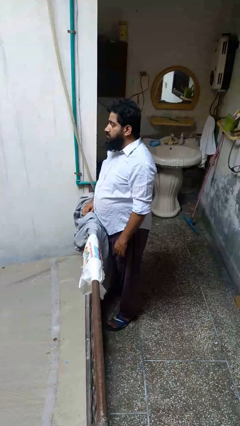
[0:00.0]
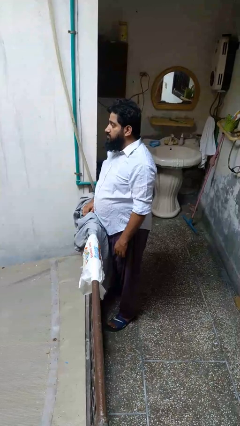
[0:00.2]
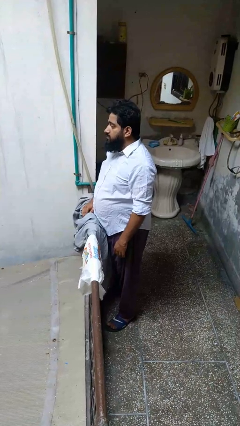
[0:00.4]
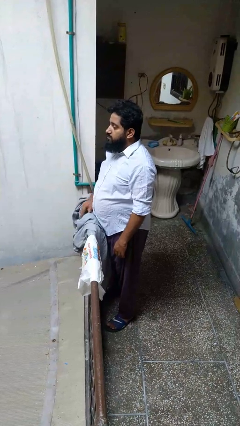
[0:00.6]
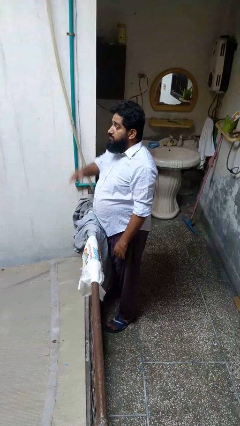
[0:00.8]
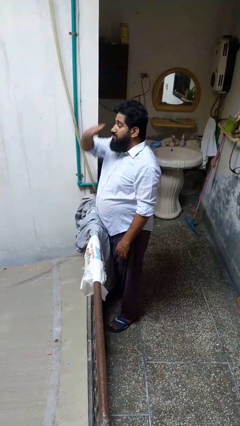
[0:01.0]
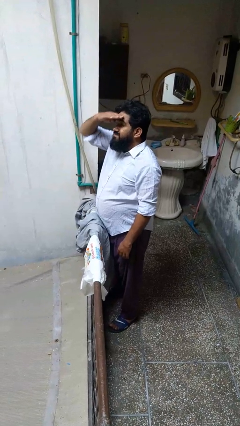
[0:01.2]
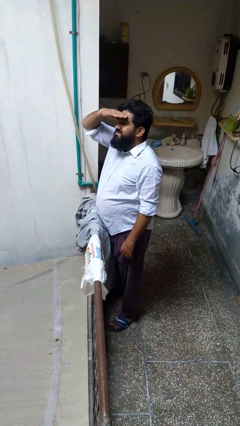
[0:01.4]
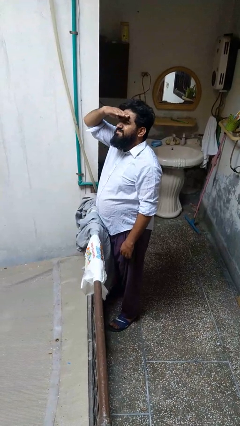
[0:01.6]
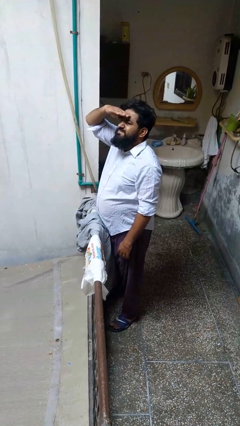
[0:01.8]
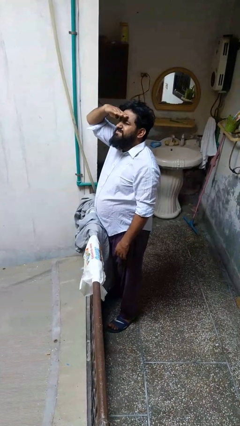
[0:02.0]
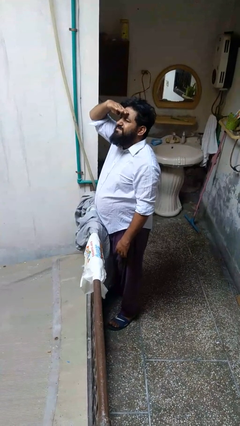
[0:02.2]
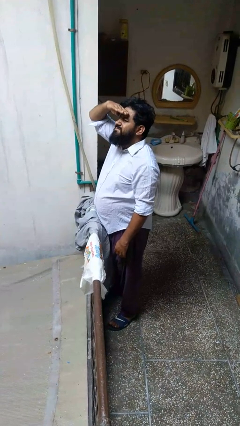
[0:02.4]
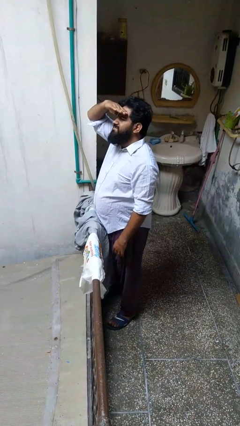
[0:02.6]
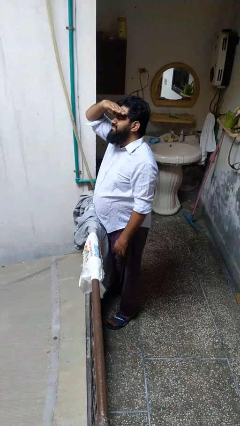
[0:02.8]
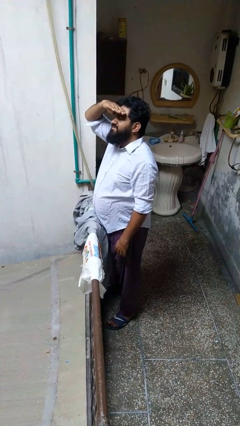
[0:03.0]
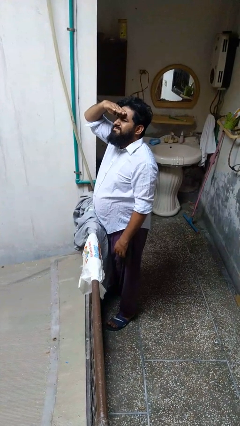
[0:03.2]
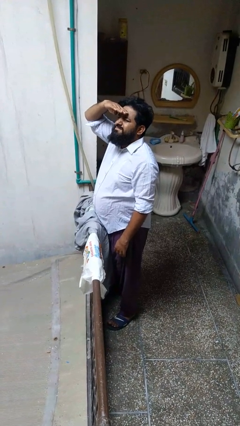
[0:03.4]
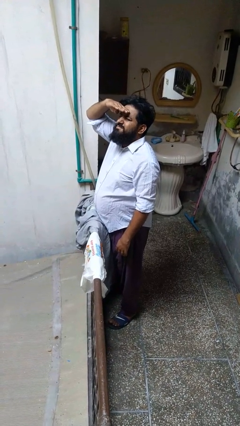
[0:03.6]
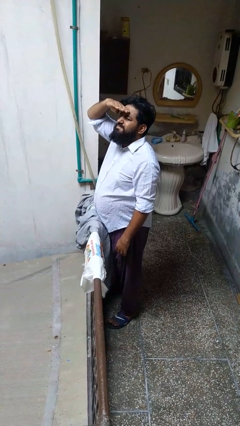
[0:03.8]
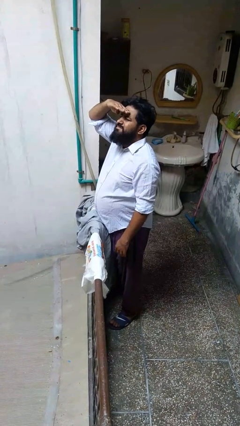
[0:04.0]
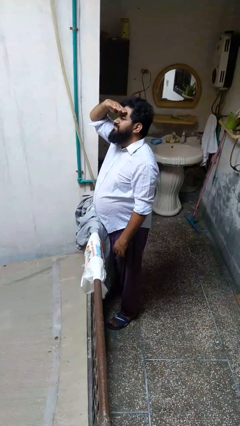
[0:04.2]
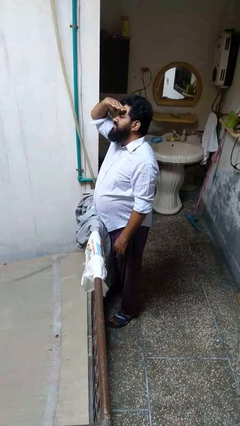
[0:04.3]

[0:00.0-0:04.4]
person shades eyes

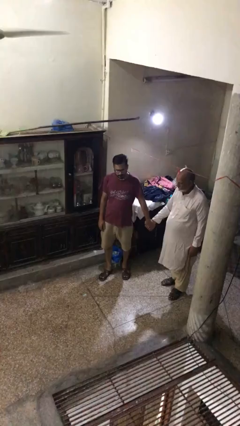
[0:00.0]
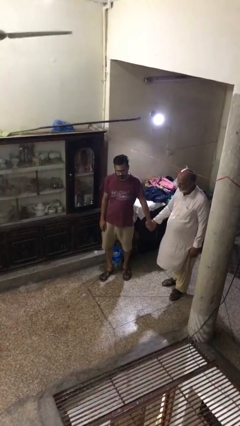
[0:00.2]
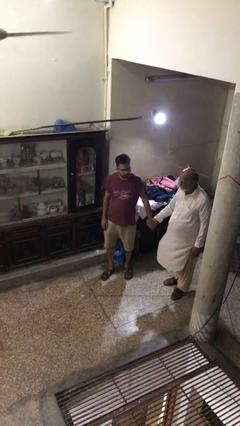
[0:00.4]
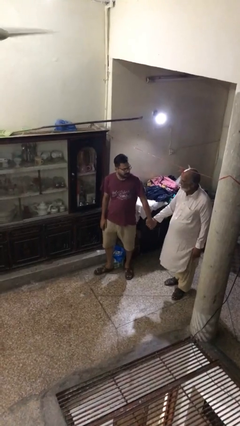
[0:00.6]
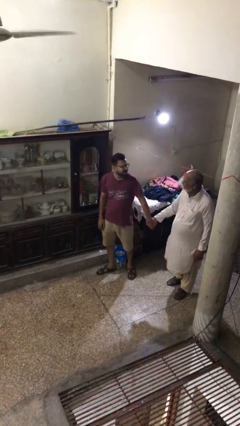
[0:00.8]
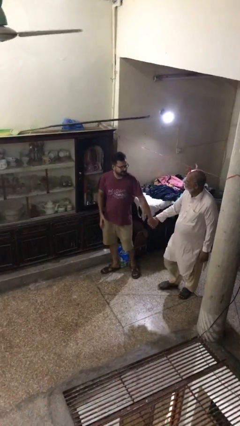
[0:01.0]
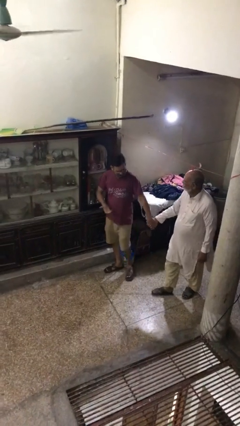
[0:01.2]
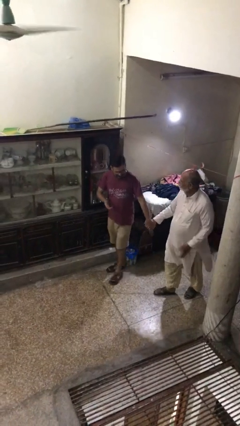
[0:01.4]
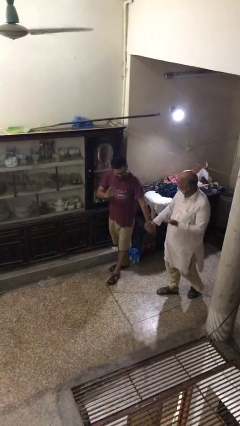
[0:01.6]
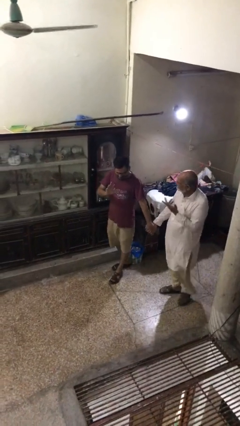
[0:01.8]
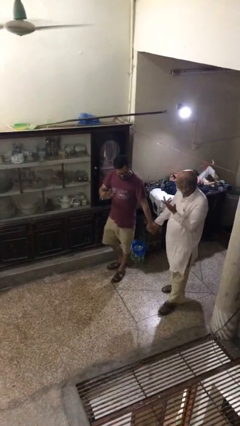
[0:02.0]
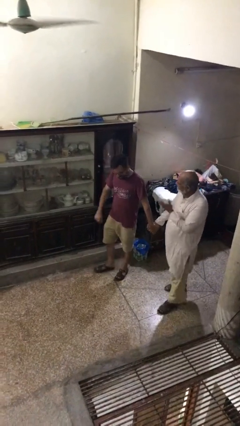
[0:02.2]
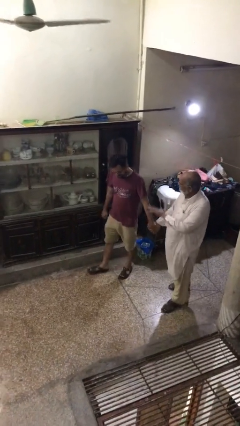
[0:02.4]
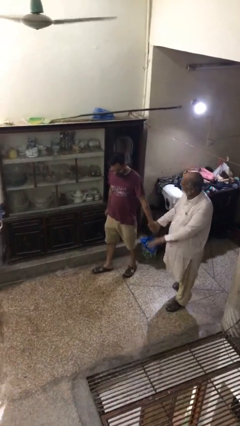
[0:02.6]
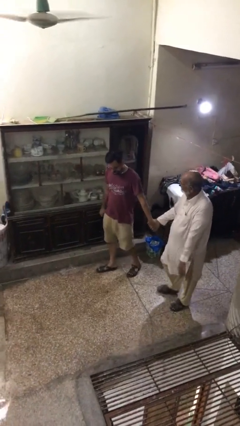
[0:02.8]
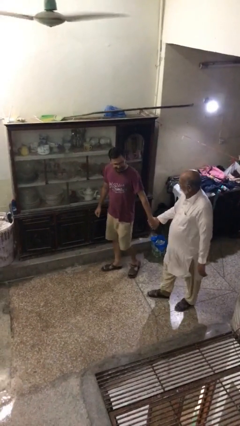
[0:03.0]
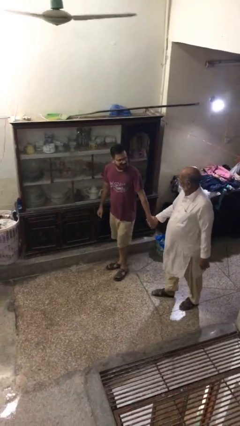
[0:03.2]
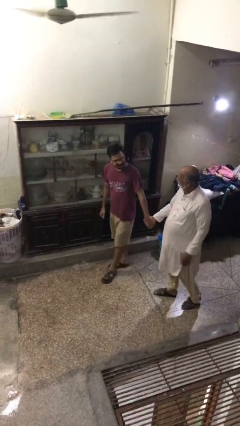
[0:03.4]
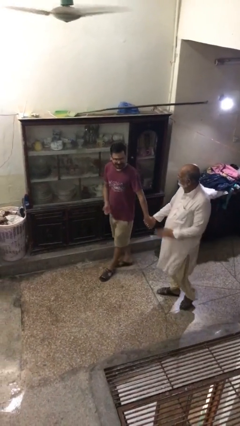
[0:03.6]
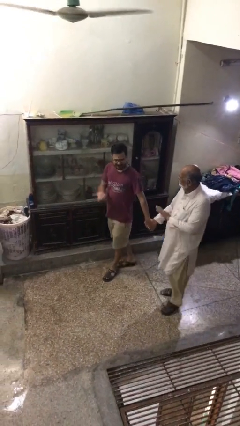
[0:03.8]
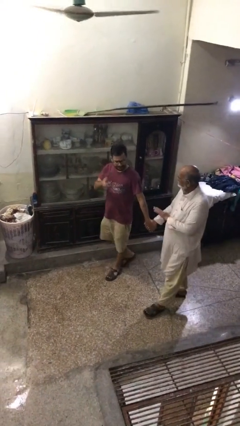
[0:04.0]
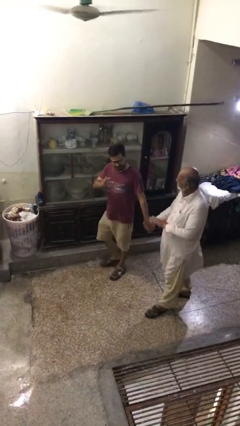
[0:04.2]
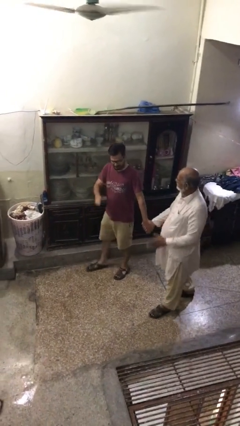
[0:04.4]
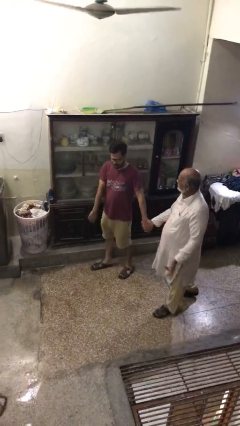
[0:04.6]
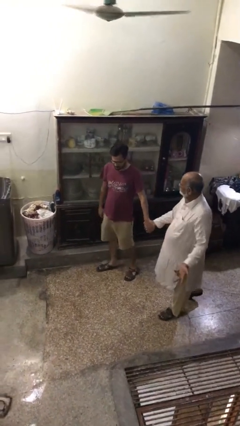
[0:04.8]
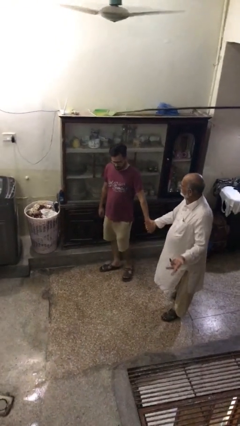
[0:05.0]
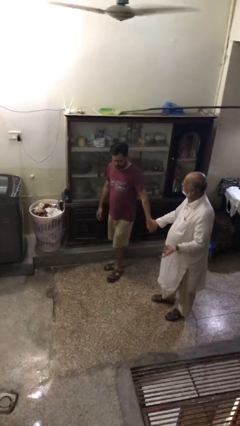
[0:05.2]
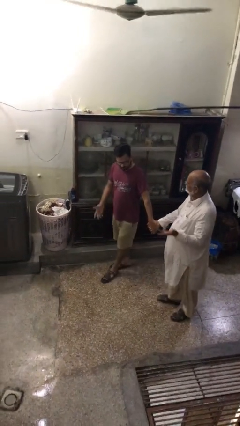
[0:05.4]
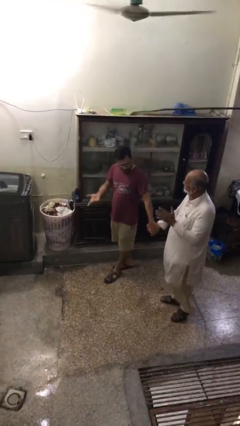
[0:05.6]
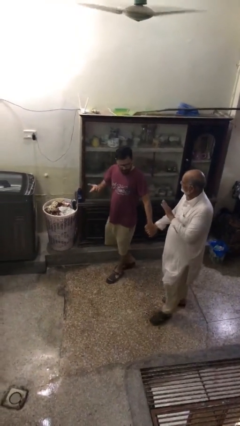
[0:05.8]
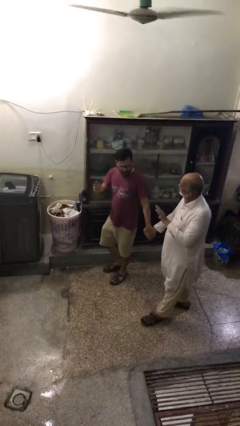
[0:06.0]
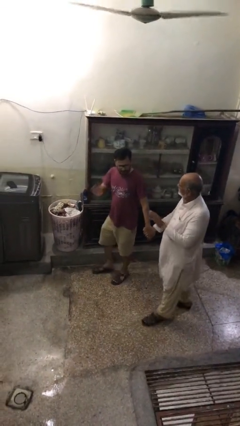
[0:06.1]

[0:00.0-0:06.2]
person holds hand

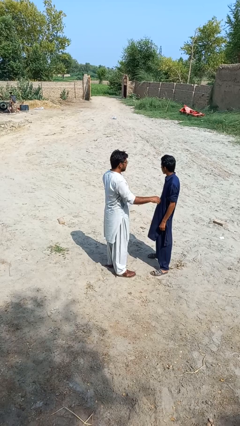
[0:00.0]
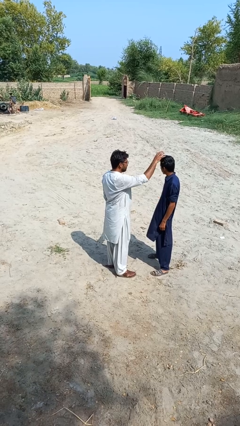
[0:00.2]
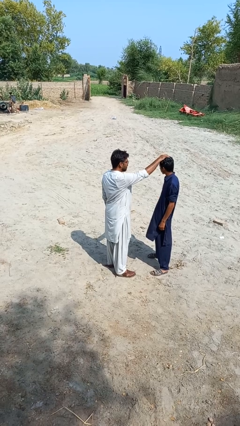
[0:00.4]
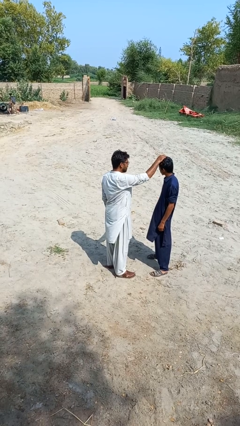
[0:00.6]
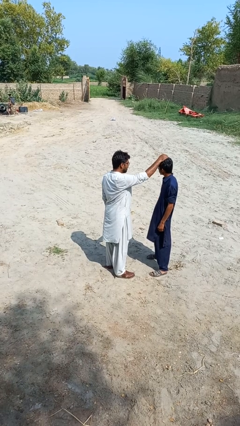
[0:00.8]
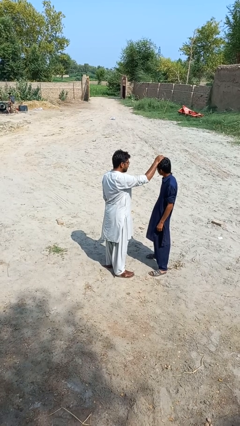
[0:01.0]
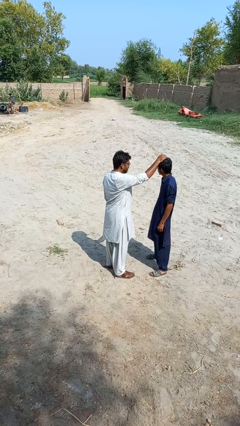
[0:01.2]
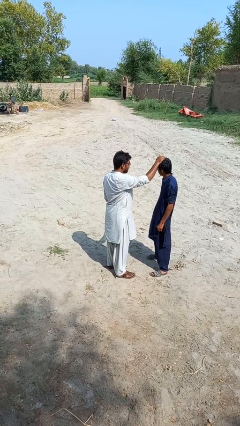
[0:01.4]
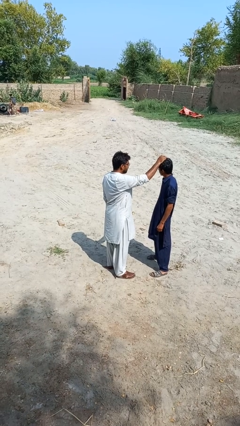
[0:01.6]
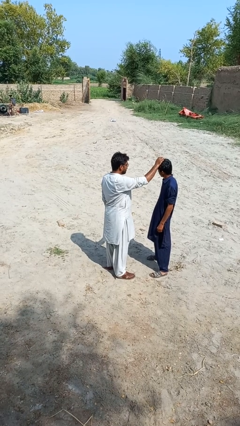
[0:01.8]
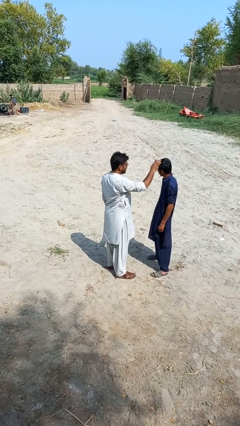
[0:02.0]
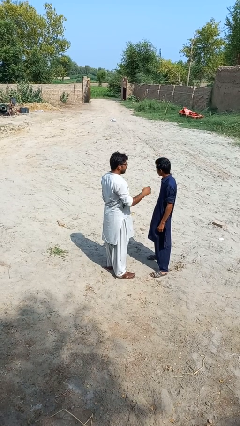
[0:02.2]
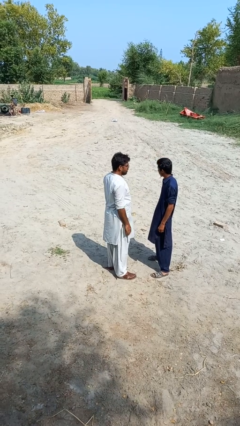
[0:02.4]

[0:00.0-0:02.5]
person grabs person by hair

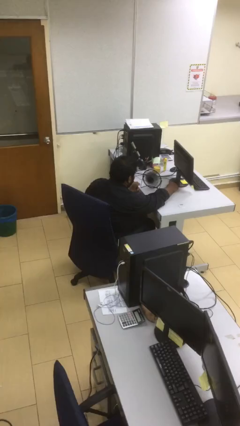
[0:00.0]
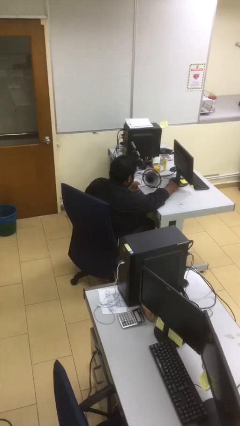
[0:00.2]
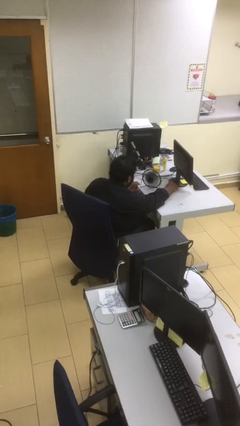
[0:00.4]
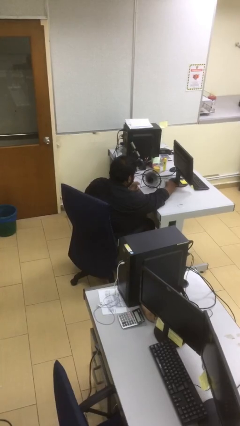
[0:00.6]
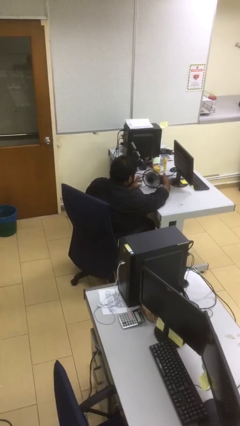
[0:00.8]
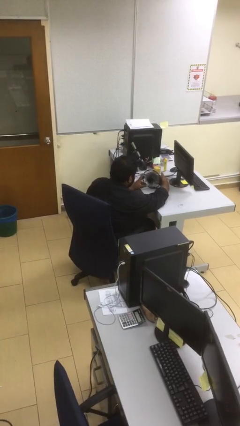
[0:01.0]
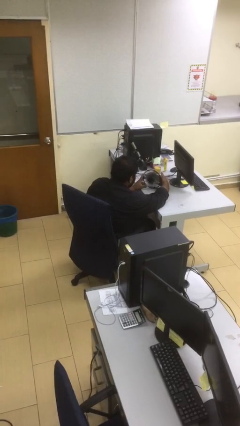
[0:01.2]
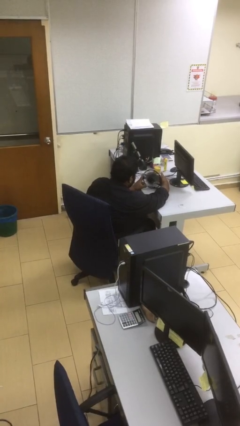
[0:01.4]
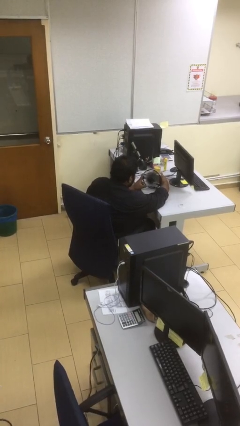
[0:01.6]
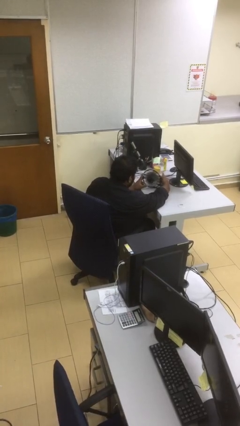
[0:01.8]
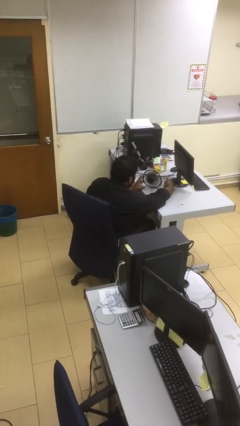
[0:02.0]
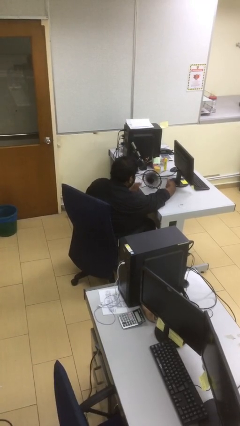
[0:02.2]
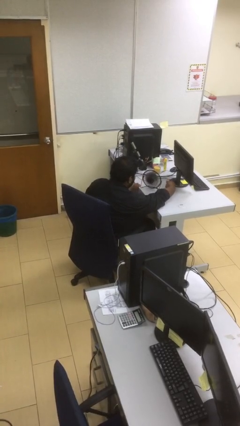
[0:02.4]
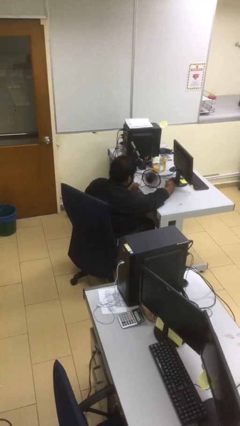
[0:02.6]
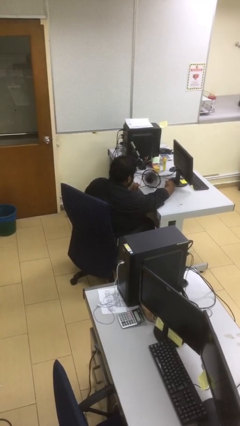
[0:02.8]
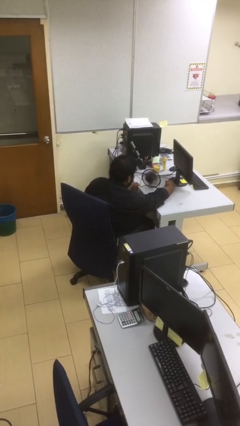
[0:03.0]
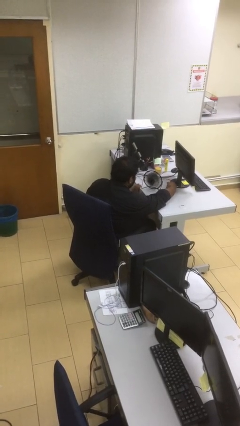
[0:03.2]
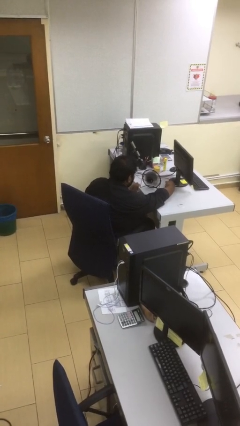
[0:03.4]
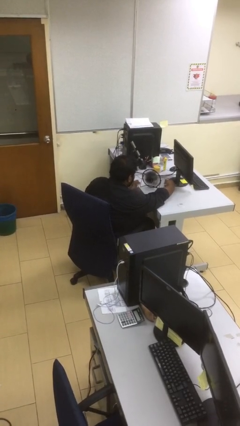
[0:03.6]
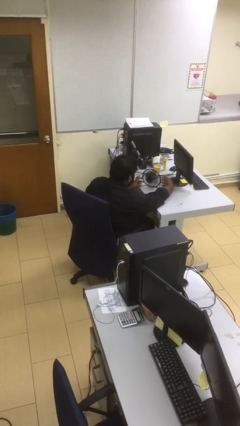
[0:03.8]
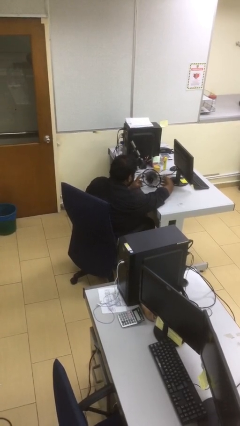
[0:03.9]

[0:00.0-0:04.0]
person turns off fan

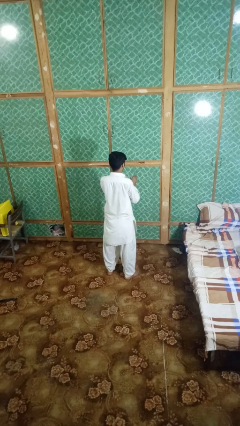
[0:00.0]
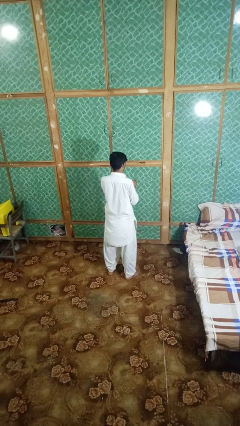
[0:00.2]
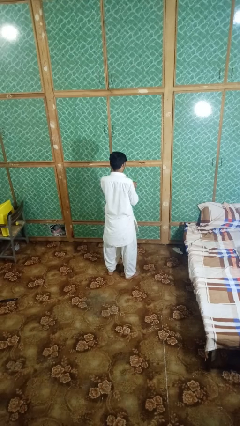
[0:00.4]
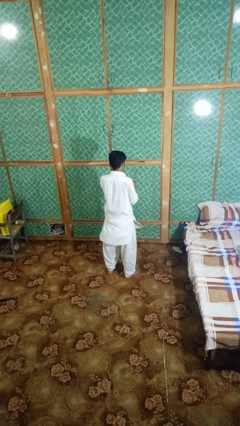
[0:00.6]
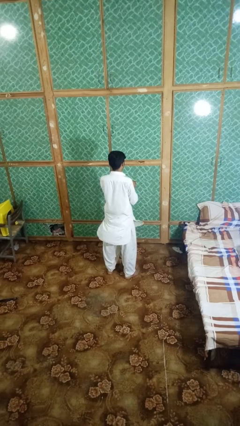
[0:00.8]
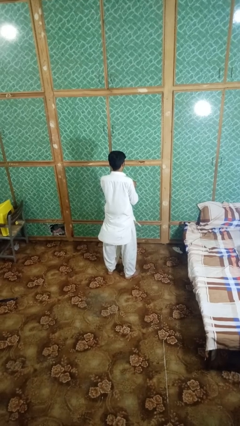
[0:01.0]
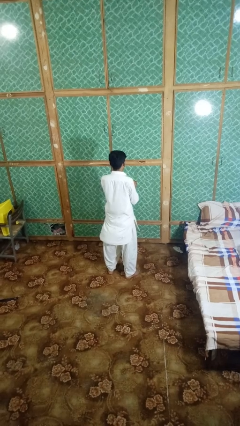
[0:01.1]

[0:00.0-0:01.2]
person opens beverage can
